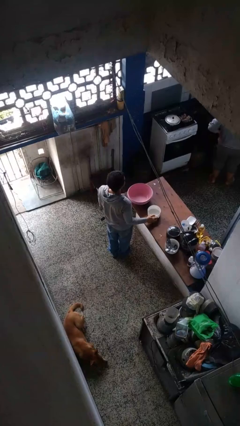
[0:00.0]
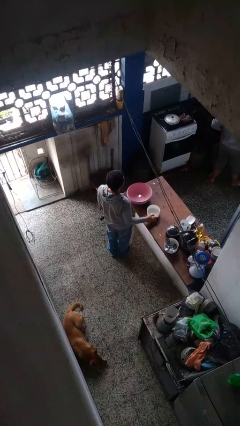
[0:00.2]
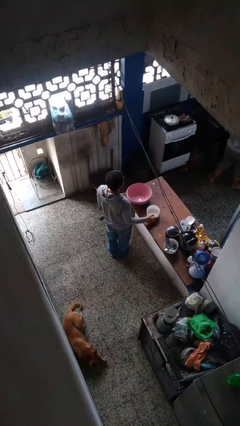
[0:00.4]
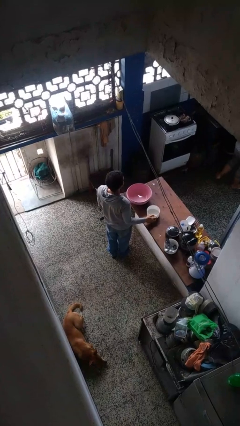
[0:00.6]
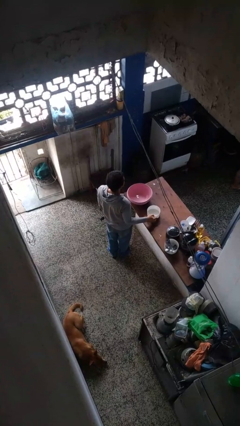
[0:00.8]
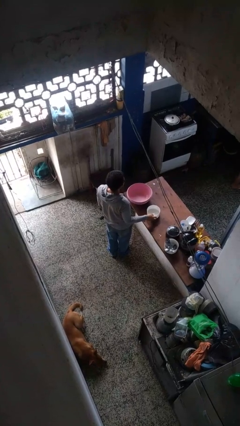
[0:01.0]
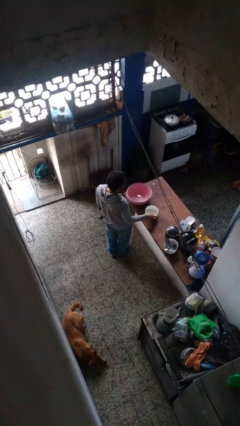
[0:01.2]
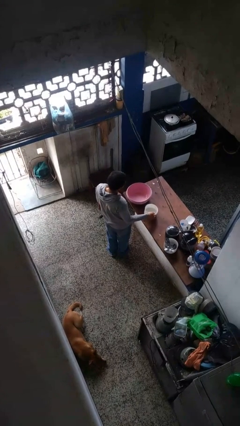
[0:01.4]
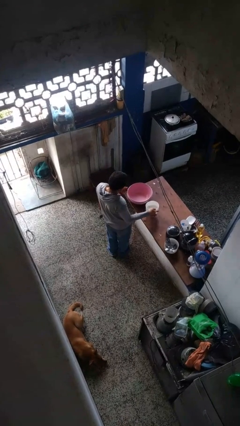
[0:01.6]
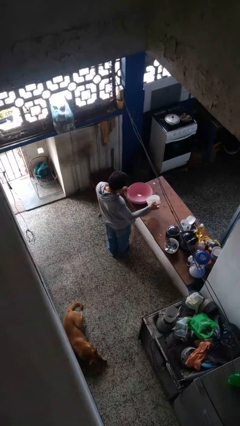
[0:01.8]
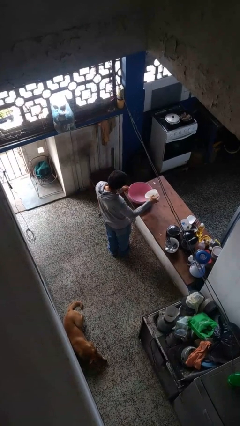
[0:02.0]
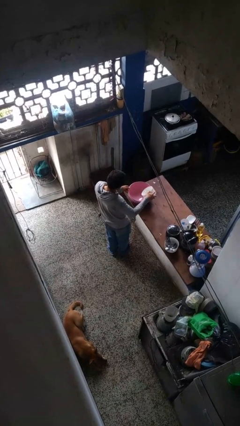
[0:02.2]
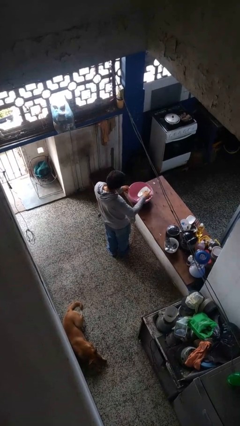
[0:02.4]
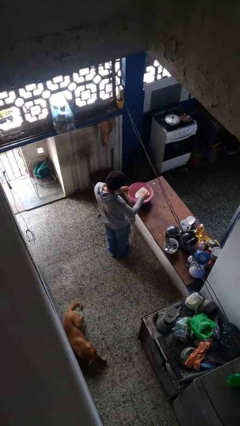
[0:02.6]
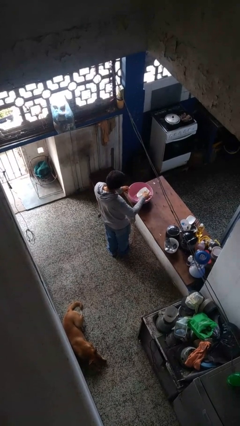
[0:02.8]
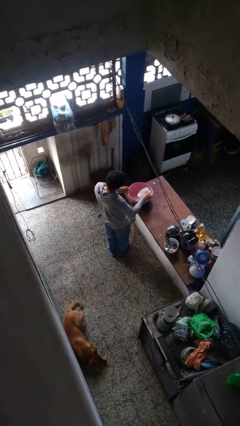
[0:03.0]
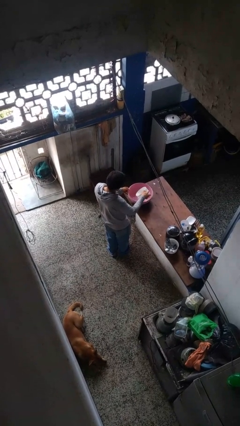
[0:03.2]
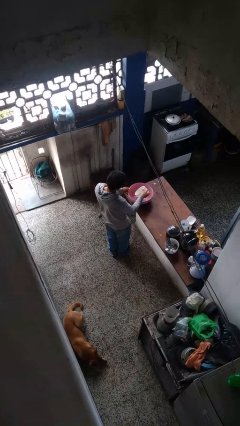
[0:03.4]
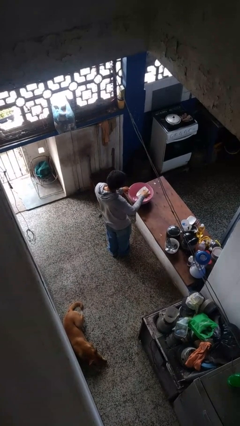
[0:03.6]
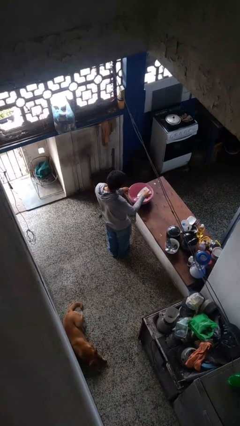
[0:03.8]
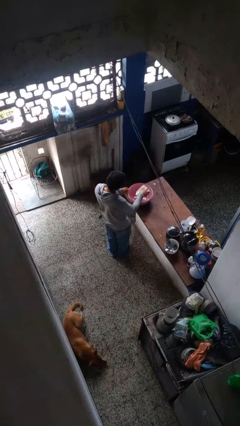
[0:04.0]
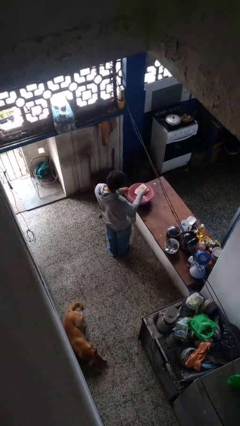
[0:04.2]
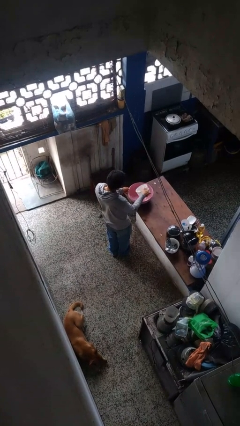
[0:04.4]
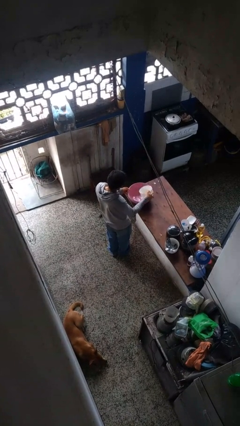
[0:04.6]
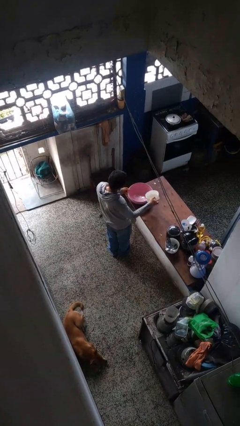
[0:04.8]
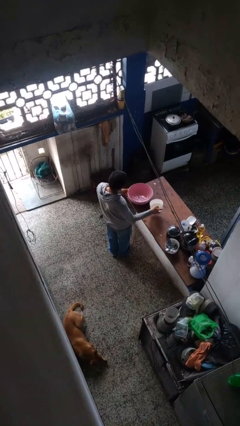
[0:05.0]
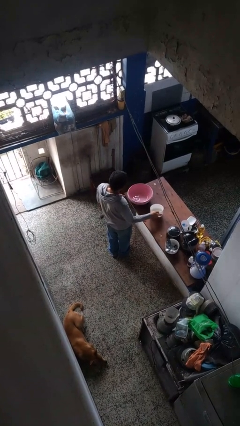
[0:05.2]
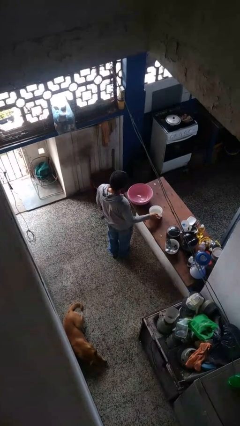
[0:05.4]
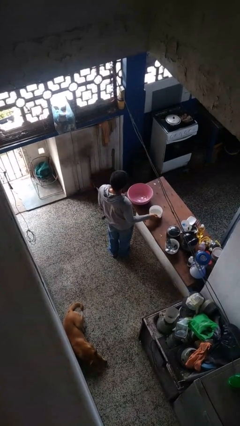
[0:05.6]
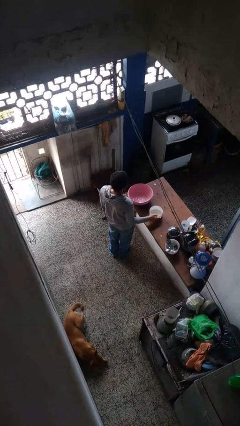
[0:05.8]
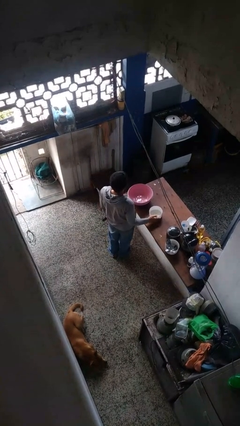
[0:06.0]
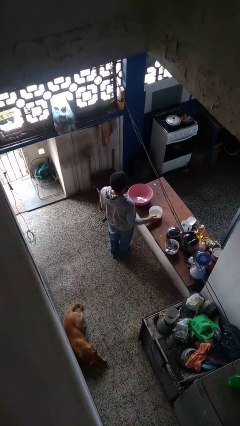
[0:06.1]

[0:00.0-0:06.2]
person pours into bowl

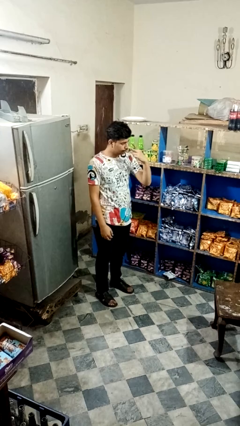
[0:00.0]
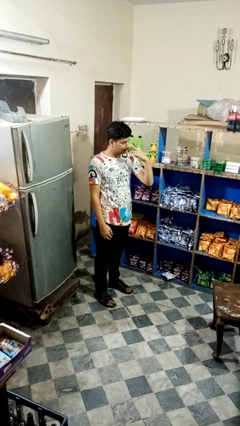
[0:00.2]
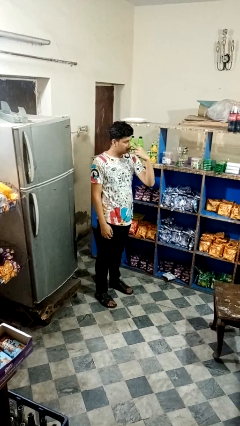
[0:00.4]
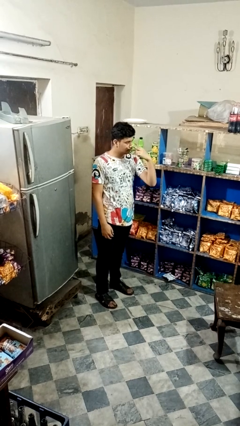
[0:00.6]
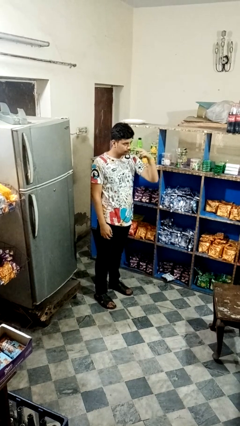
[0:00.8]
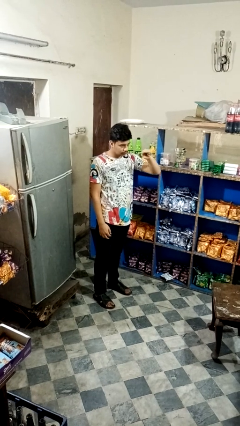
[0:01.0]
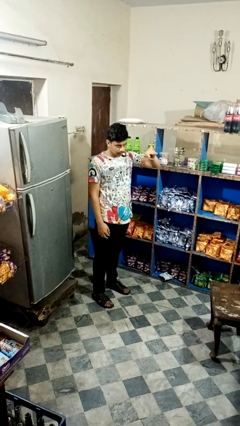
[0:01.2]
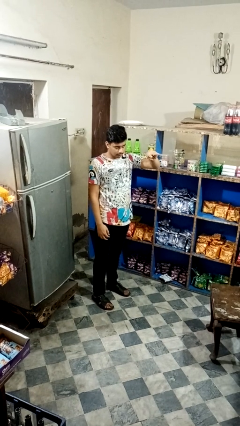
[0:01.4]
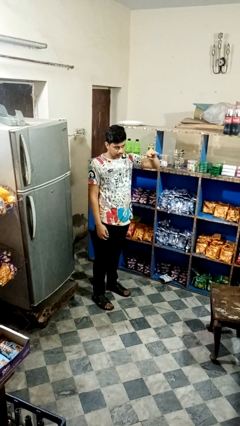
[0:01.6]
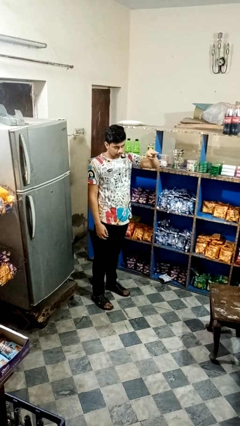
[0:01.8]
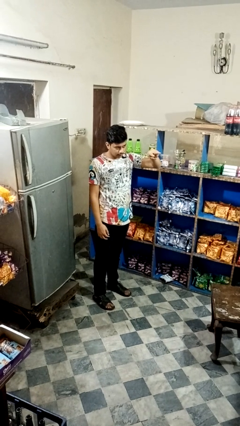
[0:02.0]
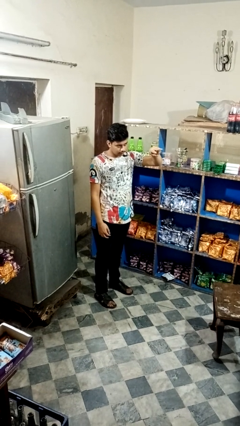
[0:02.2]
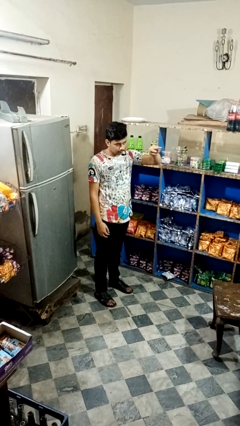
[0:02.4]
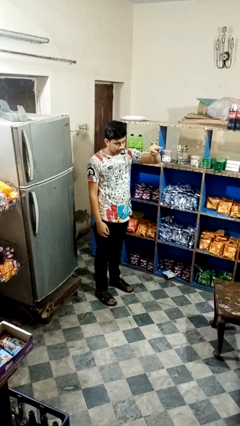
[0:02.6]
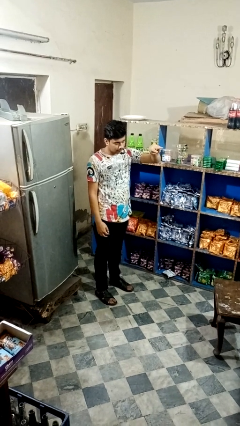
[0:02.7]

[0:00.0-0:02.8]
person gestures watch closely

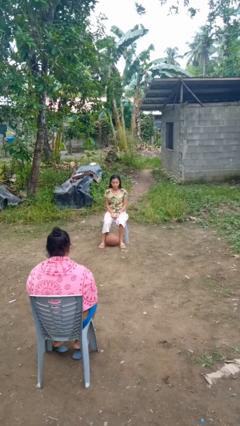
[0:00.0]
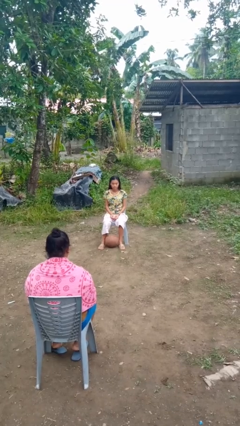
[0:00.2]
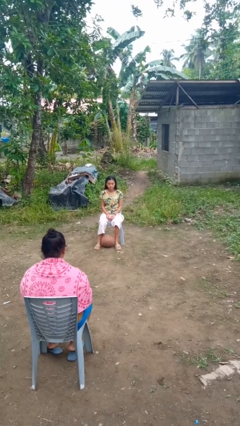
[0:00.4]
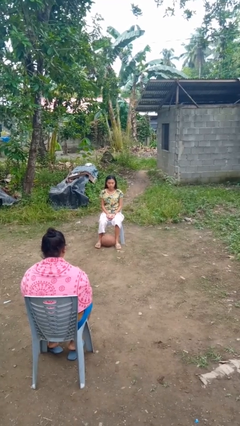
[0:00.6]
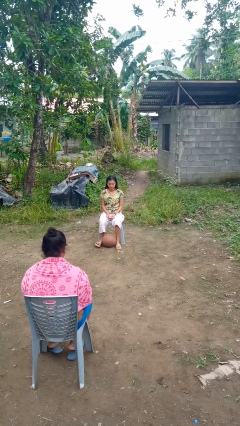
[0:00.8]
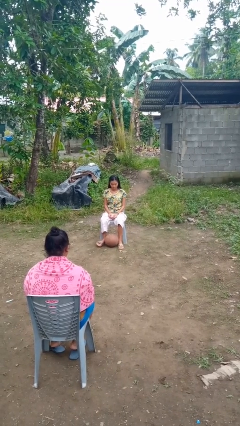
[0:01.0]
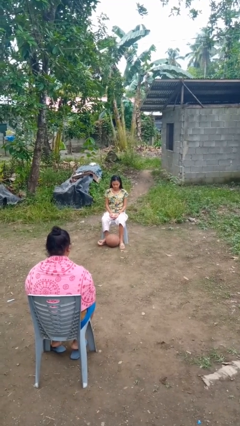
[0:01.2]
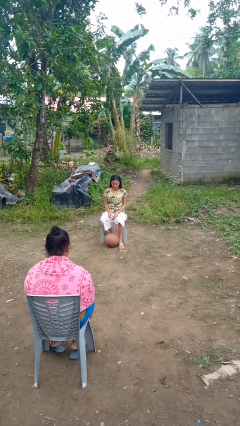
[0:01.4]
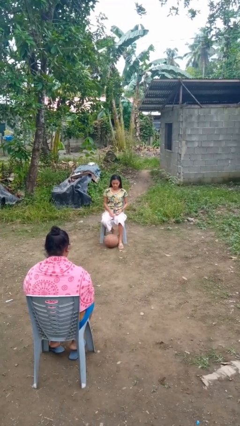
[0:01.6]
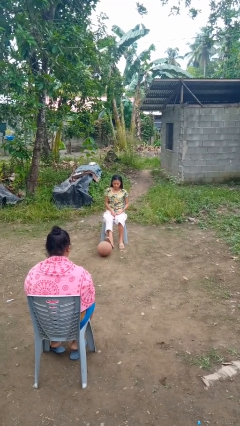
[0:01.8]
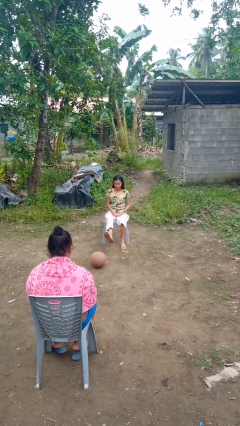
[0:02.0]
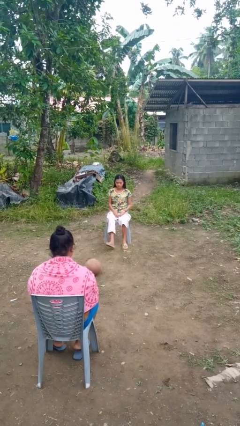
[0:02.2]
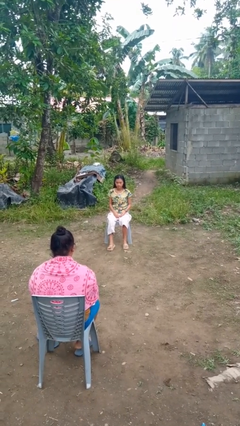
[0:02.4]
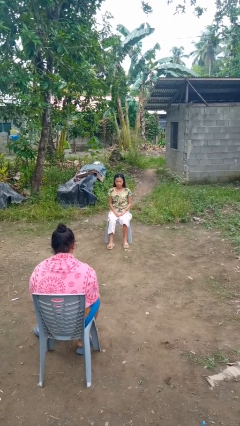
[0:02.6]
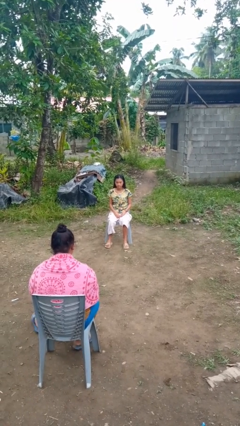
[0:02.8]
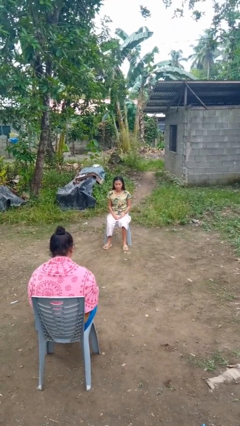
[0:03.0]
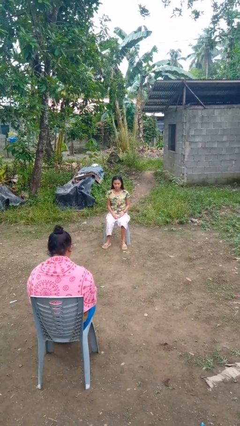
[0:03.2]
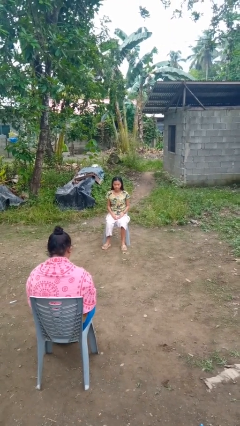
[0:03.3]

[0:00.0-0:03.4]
person kicks object to person

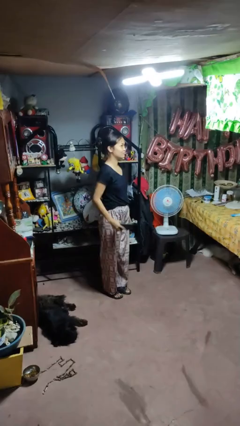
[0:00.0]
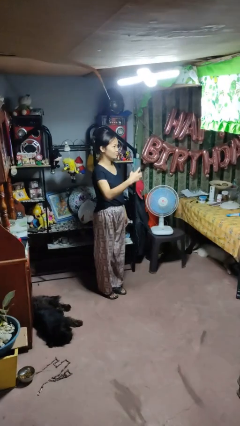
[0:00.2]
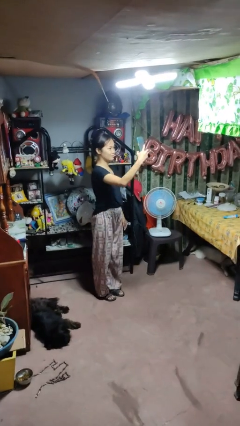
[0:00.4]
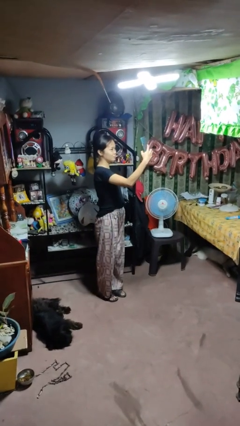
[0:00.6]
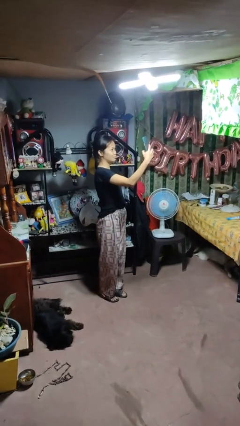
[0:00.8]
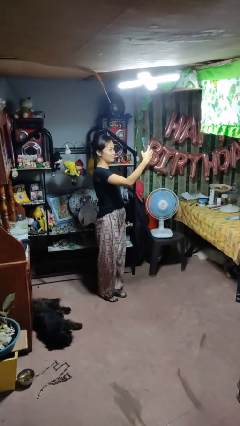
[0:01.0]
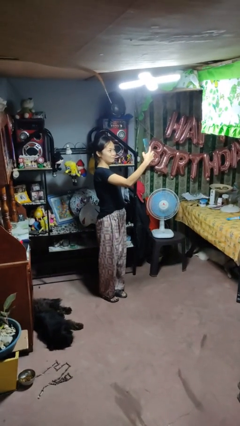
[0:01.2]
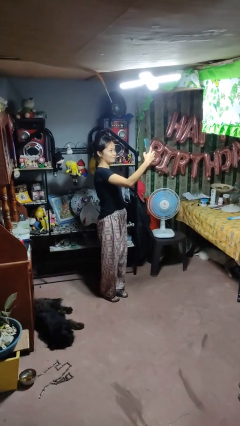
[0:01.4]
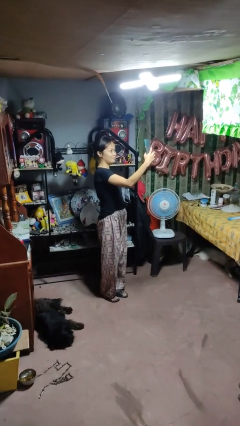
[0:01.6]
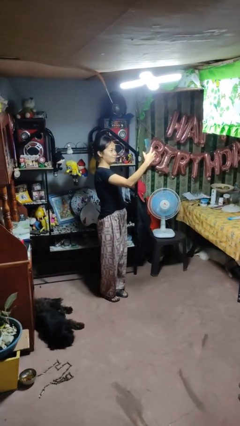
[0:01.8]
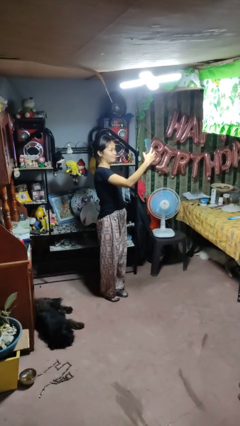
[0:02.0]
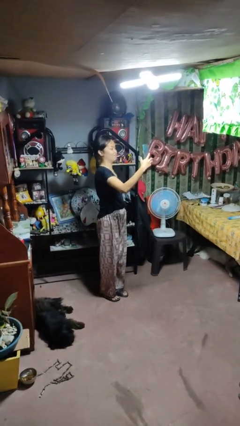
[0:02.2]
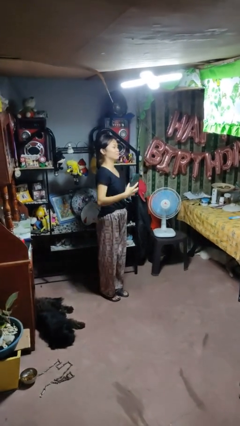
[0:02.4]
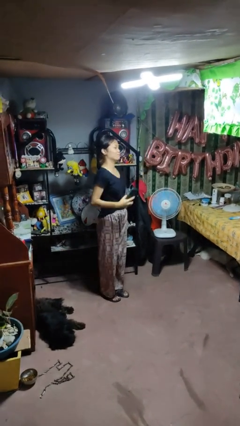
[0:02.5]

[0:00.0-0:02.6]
person takes selfie

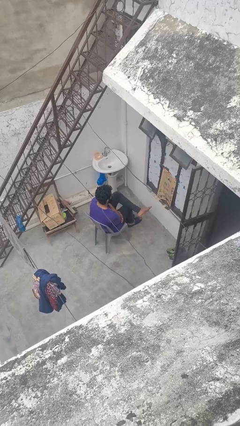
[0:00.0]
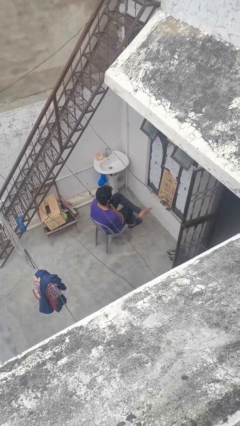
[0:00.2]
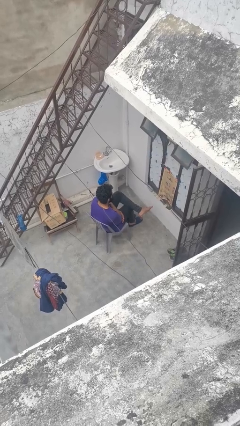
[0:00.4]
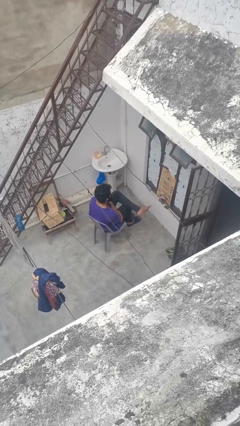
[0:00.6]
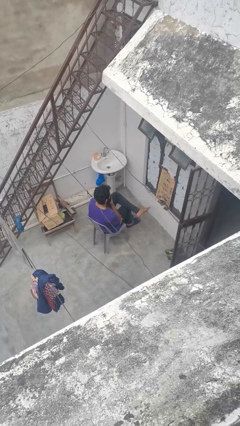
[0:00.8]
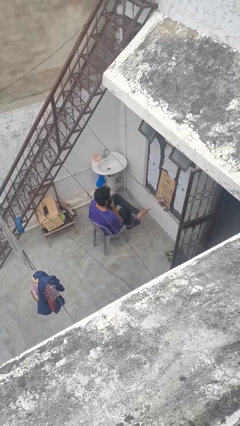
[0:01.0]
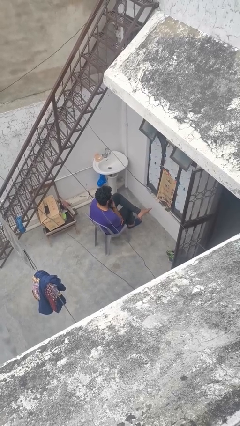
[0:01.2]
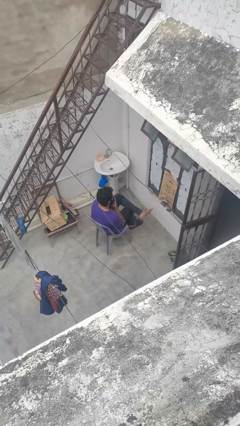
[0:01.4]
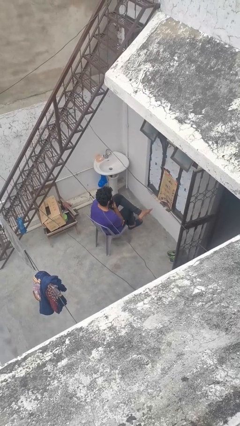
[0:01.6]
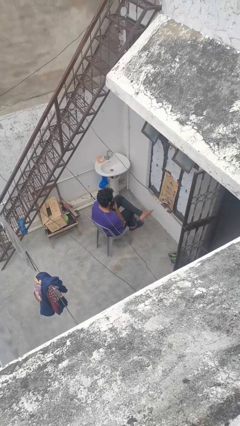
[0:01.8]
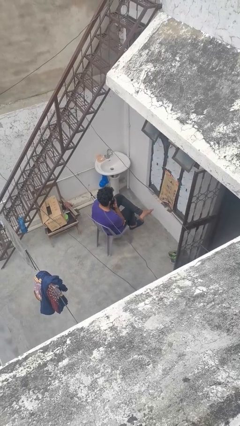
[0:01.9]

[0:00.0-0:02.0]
person strokes chin

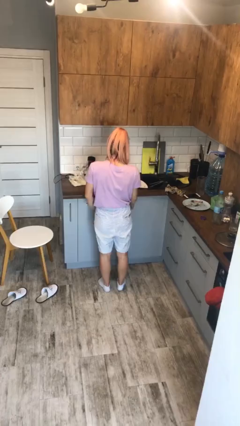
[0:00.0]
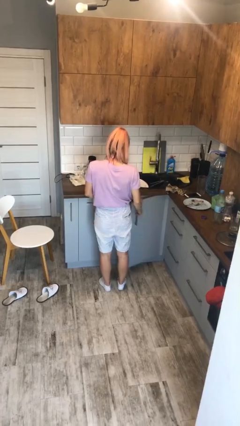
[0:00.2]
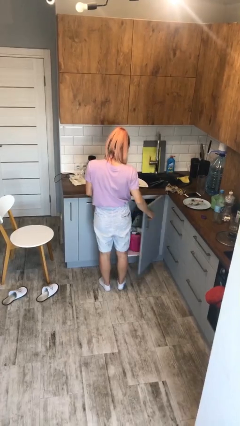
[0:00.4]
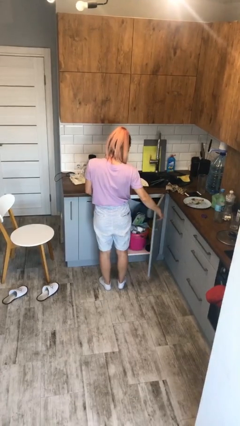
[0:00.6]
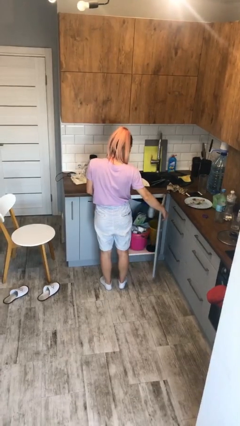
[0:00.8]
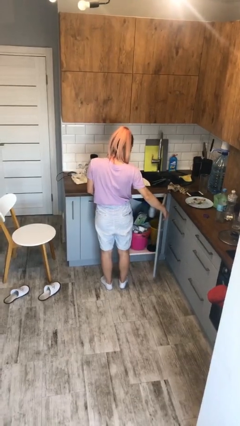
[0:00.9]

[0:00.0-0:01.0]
person closes cabinet
